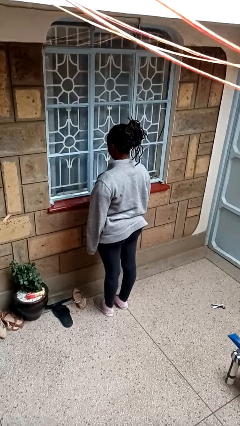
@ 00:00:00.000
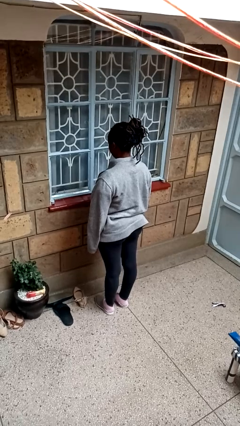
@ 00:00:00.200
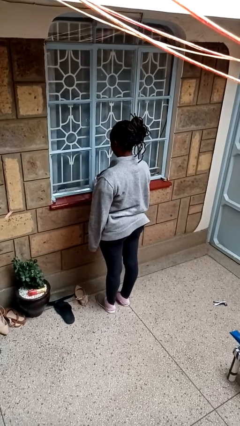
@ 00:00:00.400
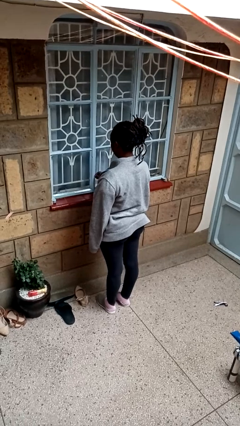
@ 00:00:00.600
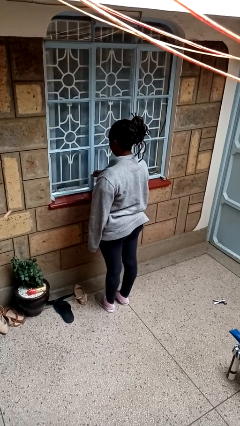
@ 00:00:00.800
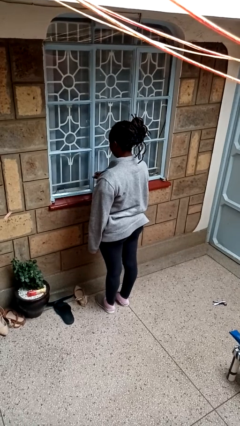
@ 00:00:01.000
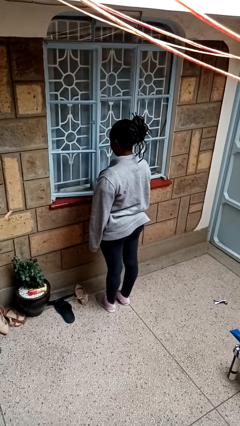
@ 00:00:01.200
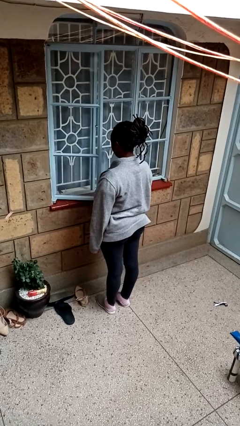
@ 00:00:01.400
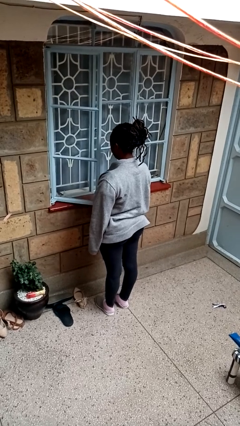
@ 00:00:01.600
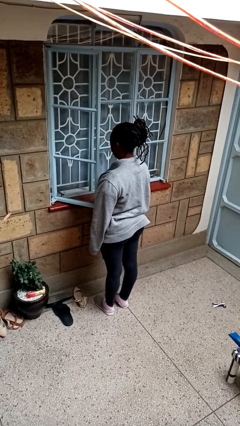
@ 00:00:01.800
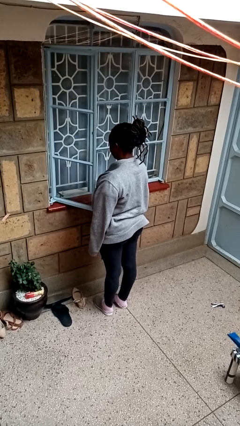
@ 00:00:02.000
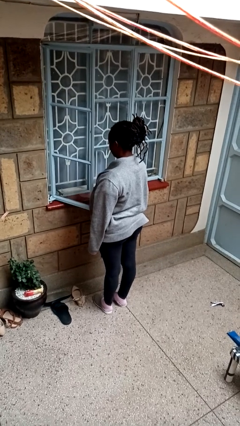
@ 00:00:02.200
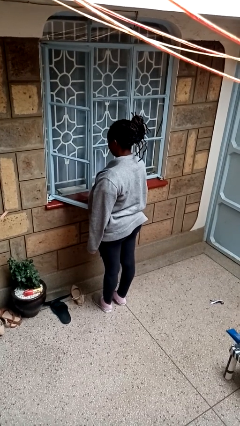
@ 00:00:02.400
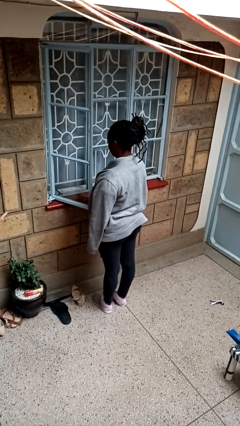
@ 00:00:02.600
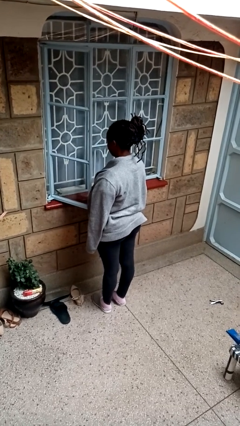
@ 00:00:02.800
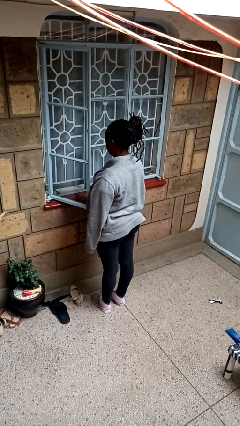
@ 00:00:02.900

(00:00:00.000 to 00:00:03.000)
person opens home window

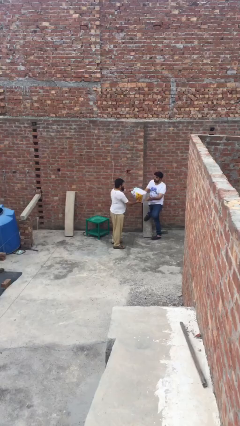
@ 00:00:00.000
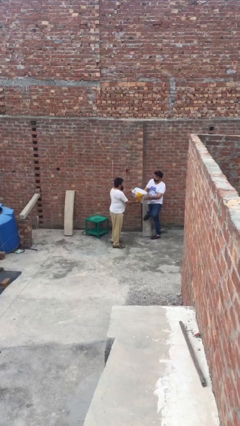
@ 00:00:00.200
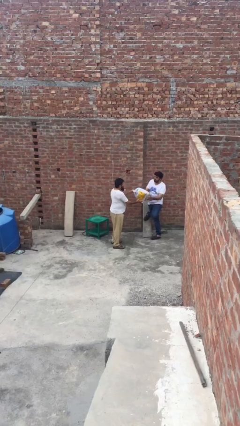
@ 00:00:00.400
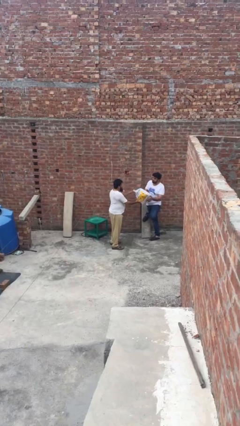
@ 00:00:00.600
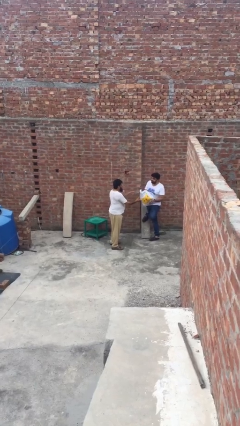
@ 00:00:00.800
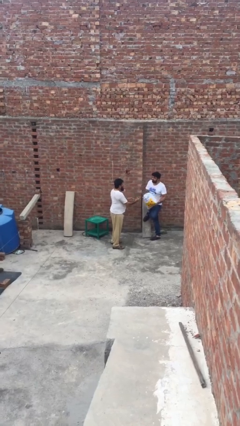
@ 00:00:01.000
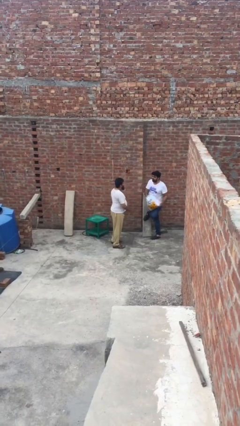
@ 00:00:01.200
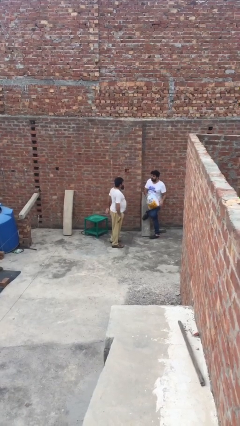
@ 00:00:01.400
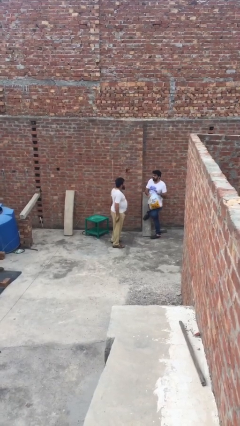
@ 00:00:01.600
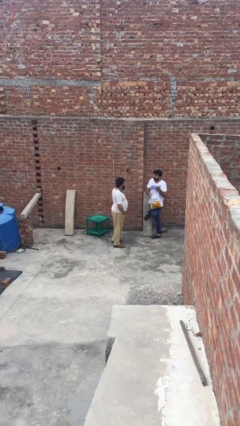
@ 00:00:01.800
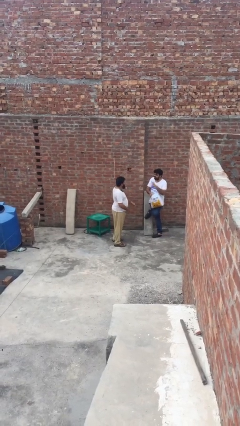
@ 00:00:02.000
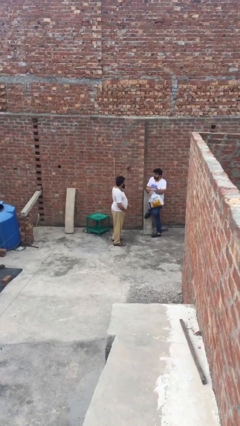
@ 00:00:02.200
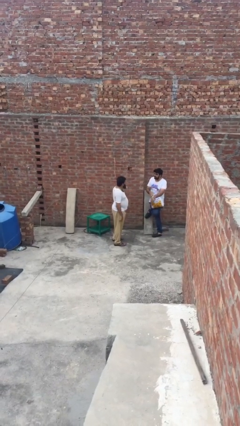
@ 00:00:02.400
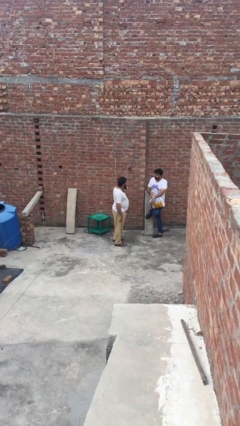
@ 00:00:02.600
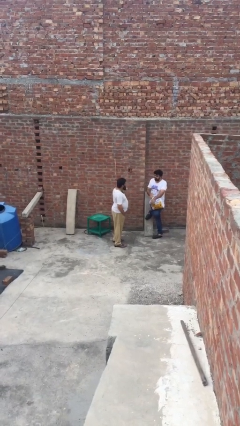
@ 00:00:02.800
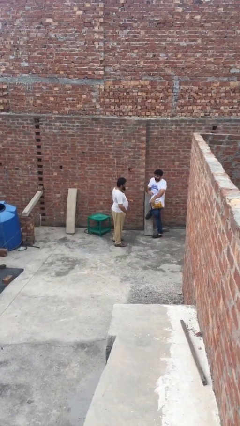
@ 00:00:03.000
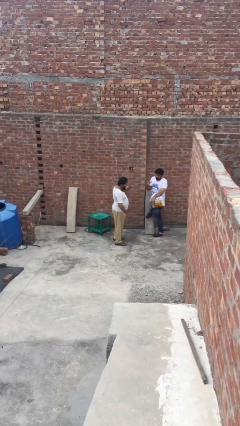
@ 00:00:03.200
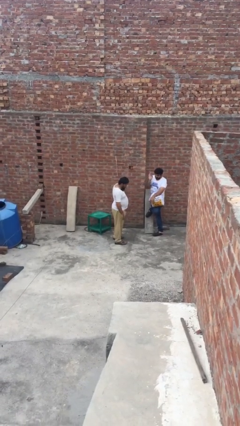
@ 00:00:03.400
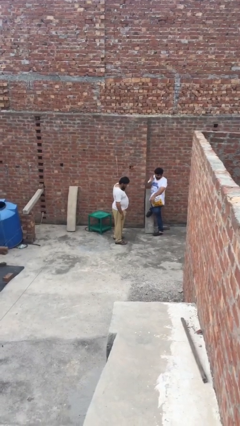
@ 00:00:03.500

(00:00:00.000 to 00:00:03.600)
person transfers object to person

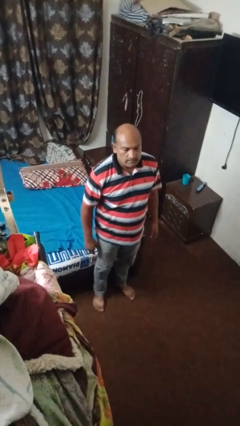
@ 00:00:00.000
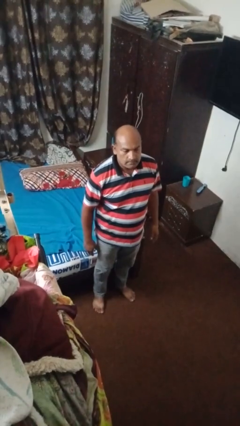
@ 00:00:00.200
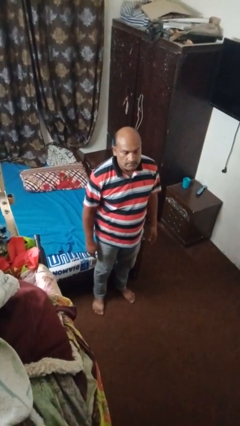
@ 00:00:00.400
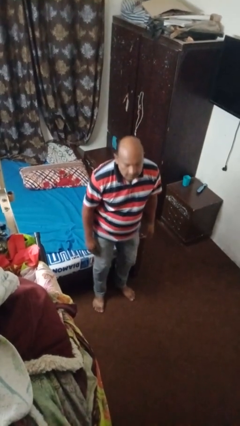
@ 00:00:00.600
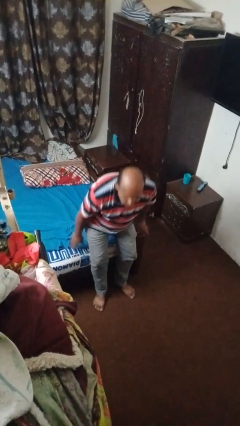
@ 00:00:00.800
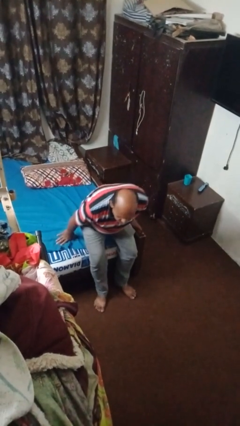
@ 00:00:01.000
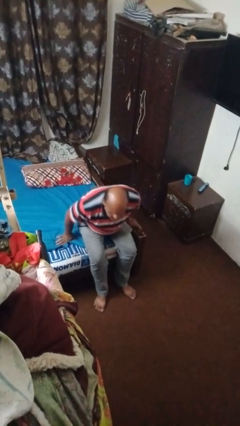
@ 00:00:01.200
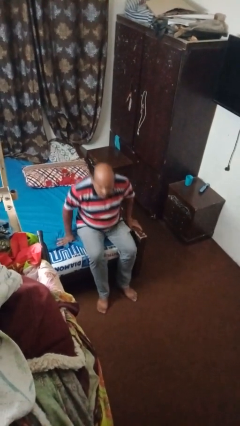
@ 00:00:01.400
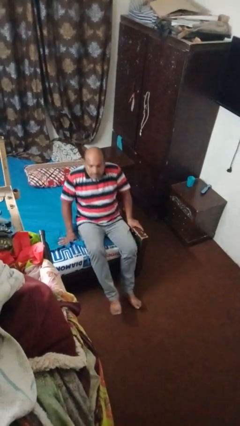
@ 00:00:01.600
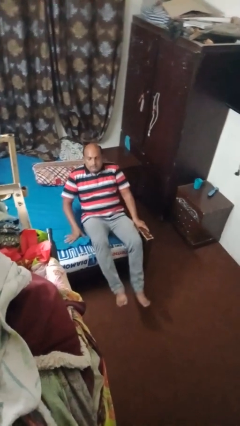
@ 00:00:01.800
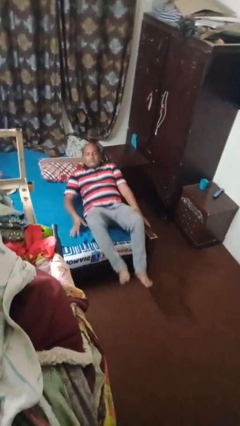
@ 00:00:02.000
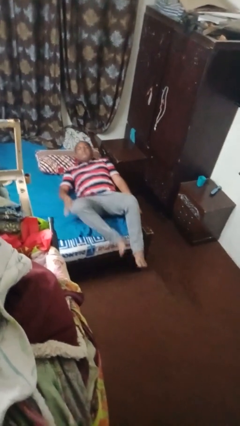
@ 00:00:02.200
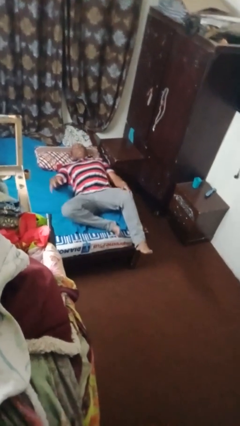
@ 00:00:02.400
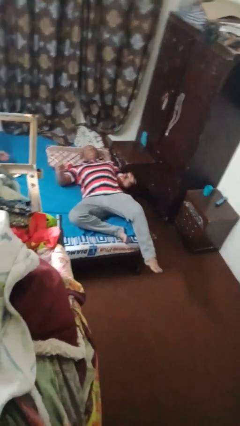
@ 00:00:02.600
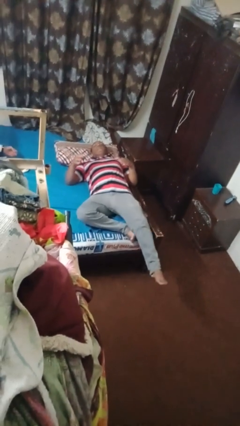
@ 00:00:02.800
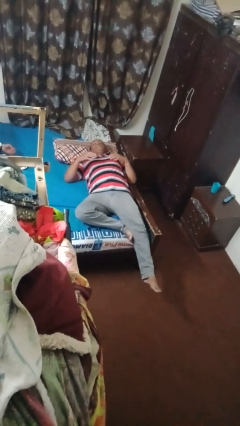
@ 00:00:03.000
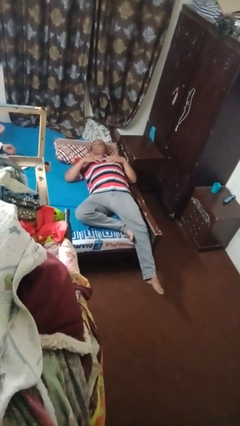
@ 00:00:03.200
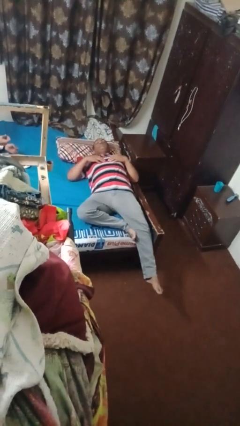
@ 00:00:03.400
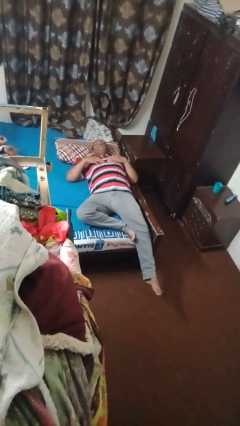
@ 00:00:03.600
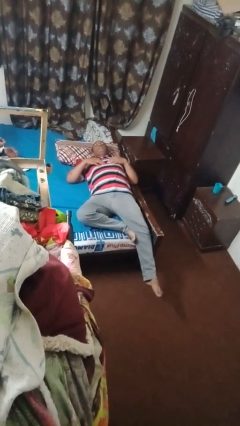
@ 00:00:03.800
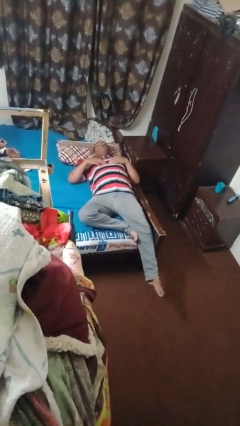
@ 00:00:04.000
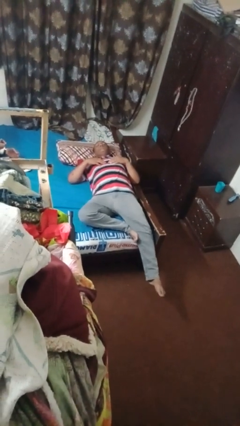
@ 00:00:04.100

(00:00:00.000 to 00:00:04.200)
person lies down on bed

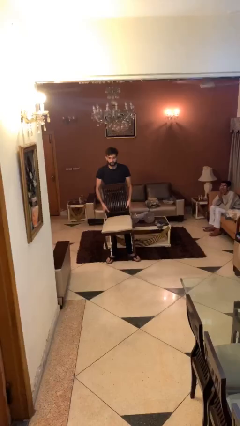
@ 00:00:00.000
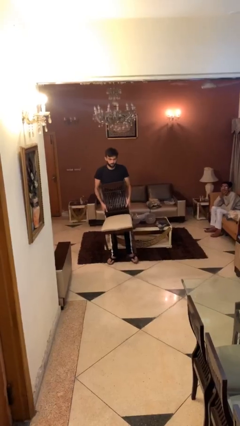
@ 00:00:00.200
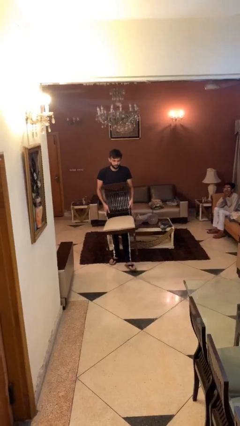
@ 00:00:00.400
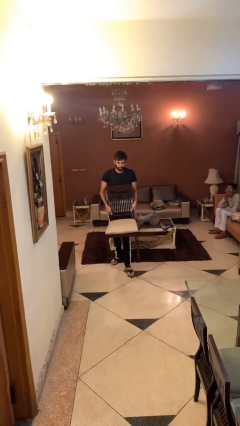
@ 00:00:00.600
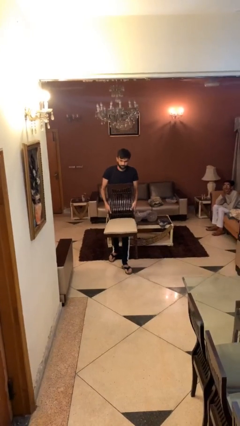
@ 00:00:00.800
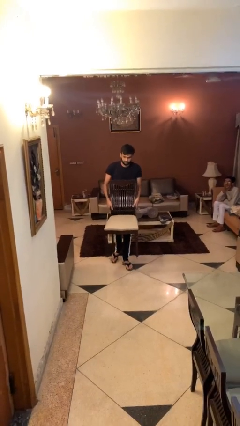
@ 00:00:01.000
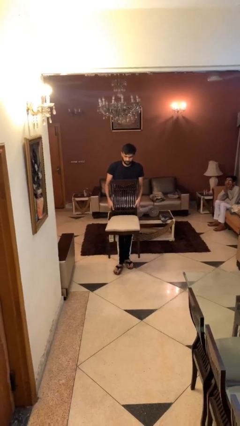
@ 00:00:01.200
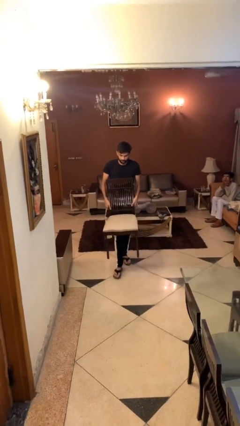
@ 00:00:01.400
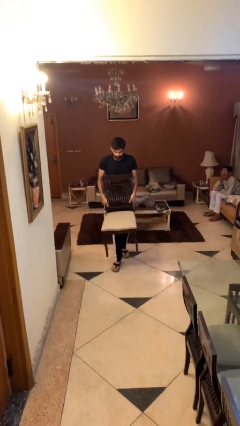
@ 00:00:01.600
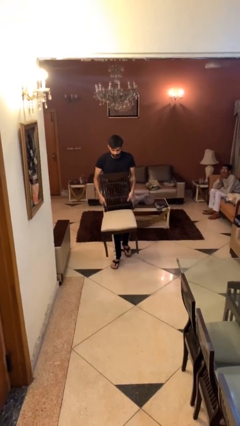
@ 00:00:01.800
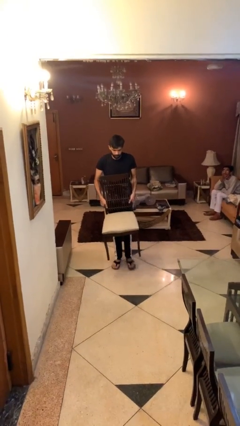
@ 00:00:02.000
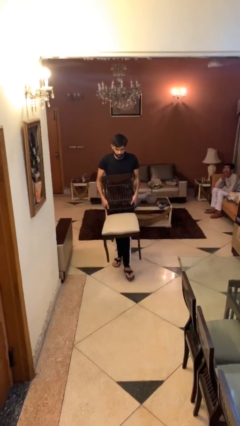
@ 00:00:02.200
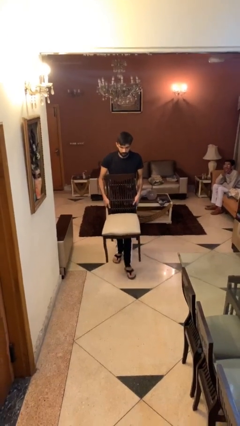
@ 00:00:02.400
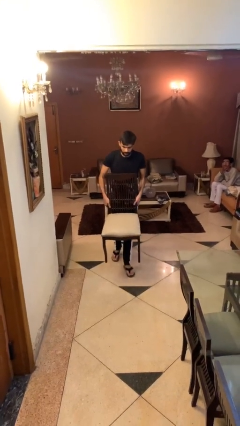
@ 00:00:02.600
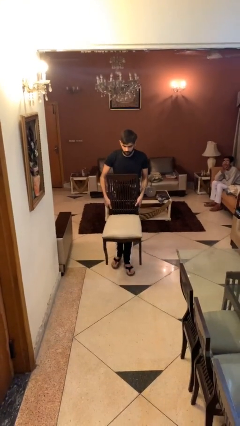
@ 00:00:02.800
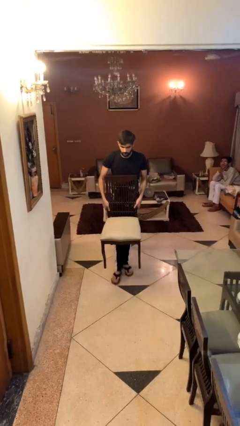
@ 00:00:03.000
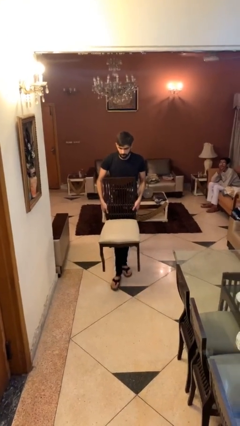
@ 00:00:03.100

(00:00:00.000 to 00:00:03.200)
person carries heavy object

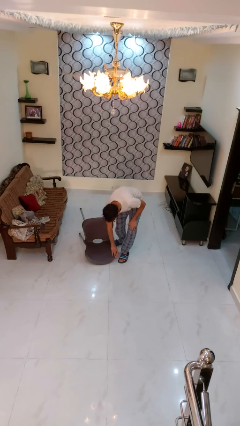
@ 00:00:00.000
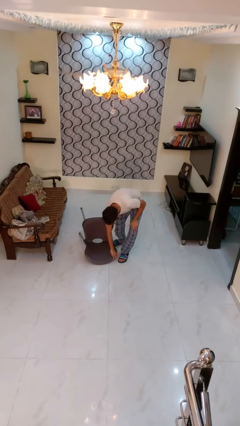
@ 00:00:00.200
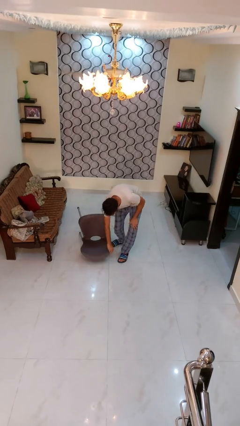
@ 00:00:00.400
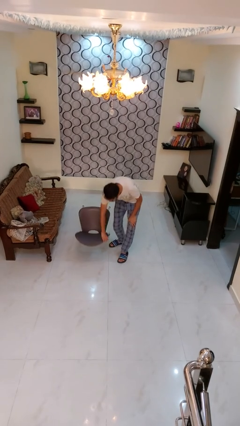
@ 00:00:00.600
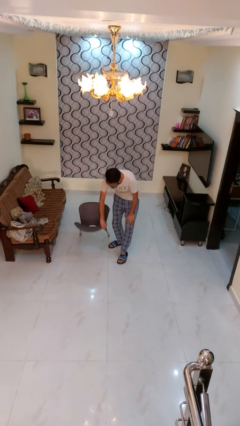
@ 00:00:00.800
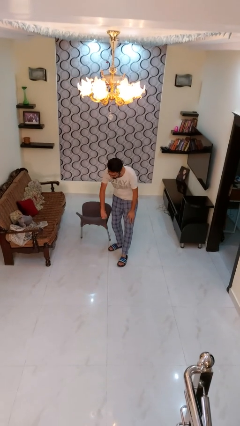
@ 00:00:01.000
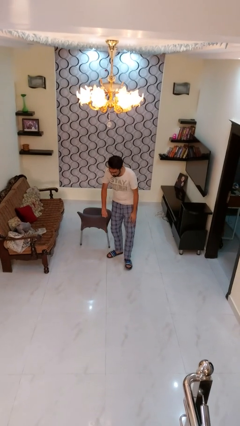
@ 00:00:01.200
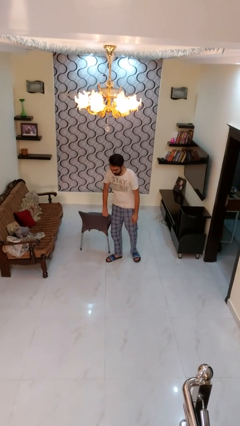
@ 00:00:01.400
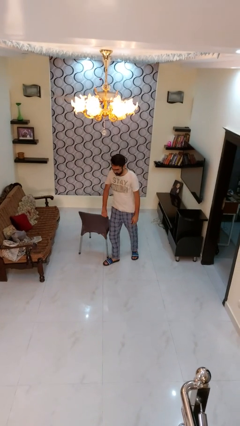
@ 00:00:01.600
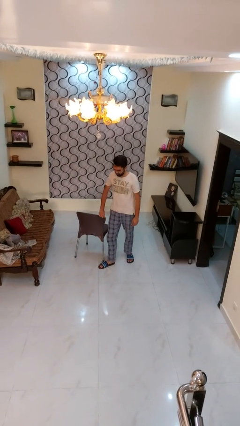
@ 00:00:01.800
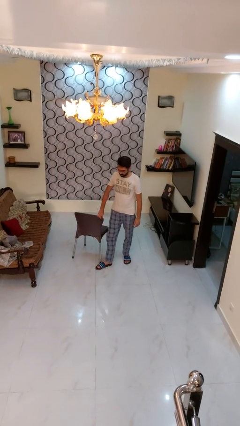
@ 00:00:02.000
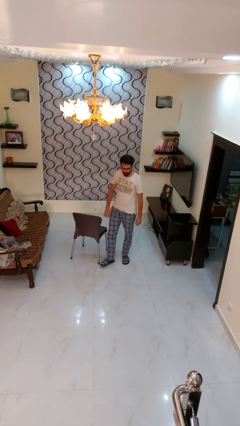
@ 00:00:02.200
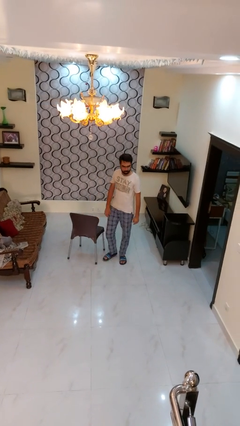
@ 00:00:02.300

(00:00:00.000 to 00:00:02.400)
person sets upright furniture

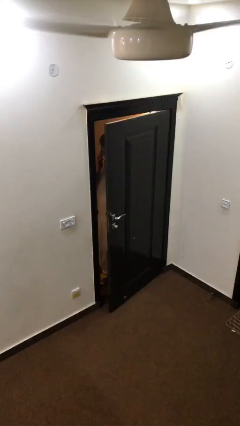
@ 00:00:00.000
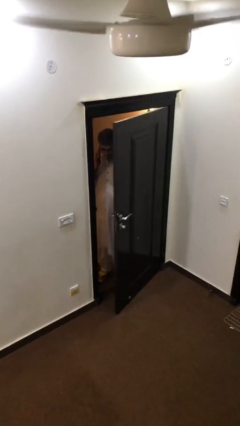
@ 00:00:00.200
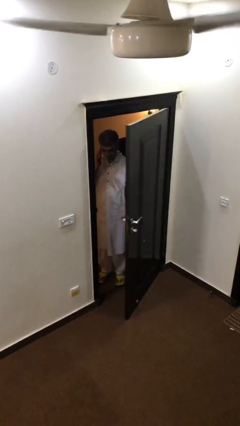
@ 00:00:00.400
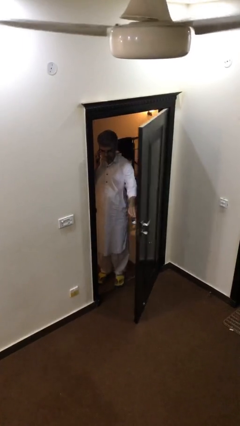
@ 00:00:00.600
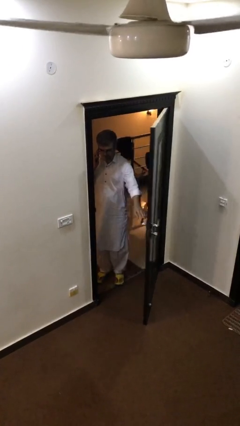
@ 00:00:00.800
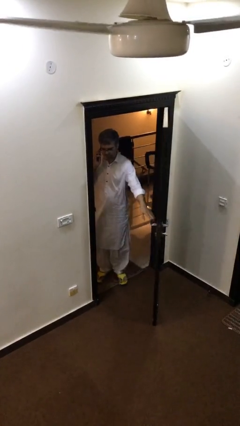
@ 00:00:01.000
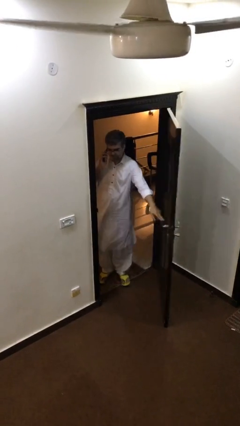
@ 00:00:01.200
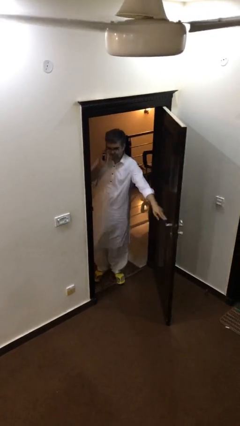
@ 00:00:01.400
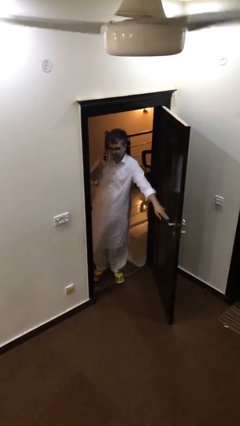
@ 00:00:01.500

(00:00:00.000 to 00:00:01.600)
person opens facility door
